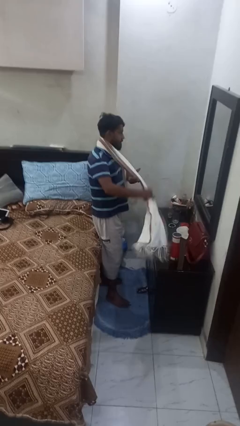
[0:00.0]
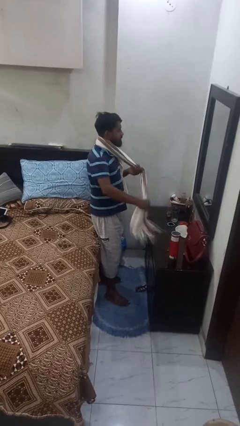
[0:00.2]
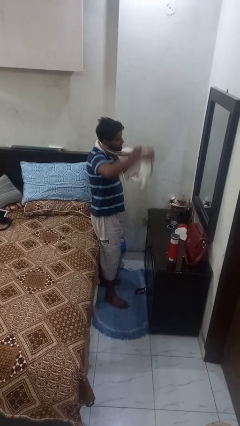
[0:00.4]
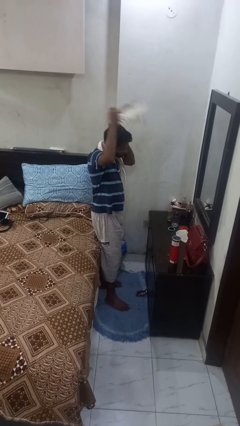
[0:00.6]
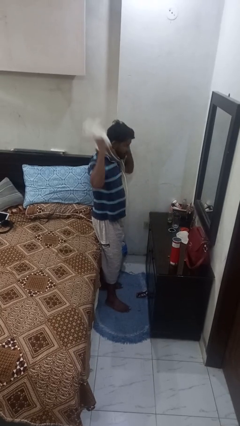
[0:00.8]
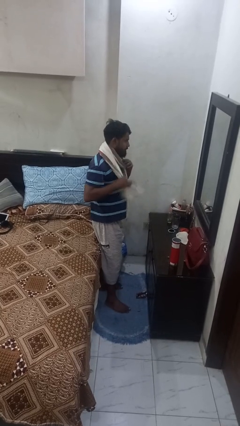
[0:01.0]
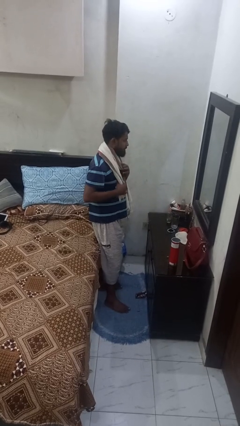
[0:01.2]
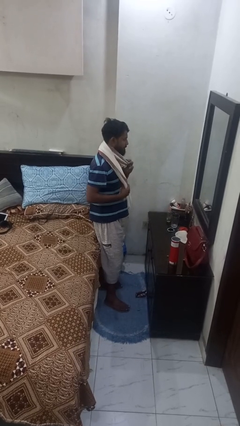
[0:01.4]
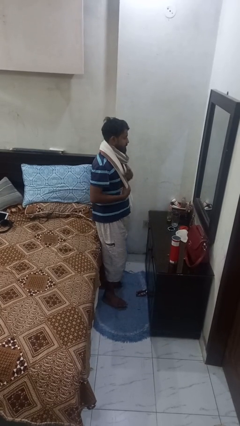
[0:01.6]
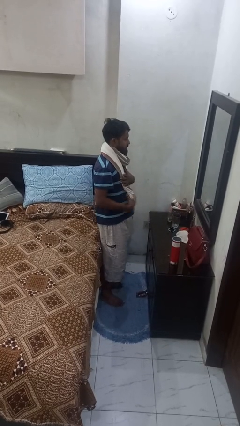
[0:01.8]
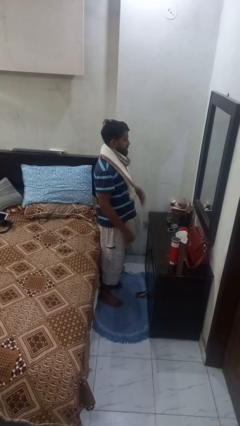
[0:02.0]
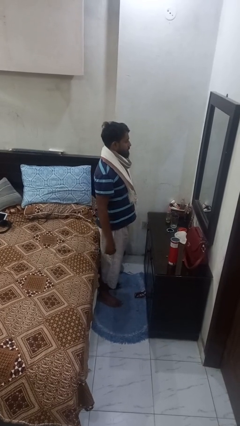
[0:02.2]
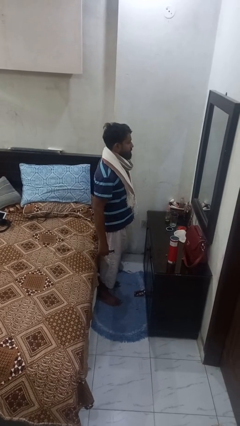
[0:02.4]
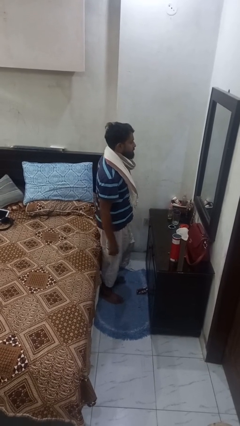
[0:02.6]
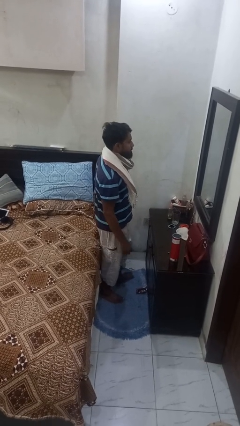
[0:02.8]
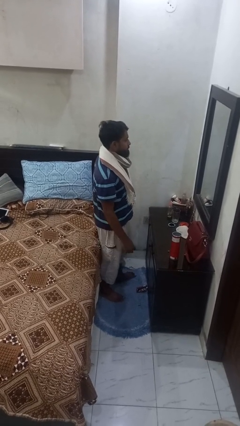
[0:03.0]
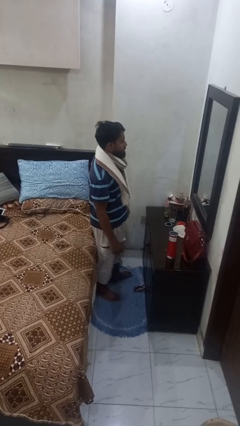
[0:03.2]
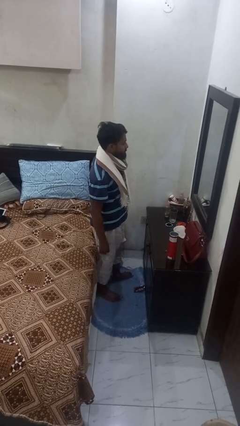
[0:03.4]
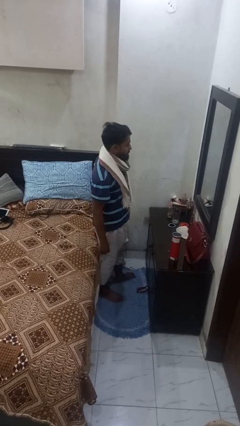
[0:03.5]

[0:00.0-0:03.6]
person puts on scarf

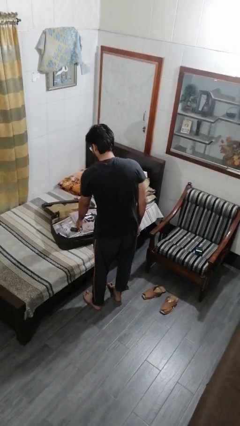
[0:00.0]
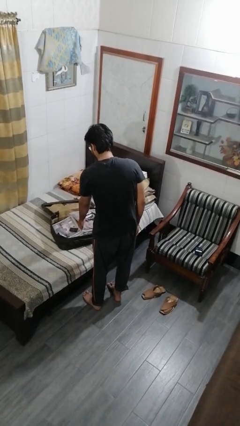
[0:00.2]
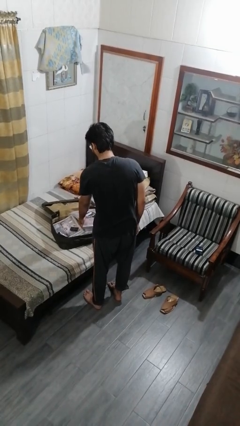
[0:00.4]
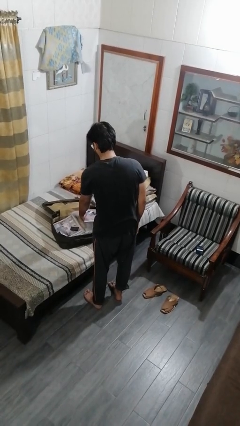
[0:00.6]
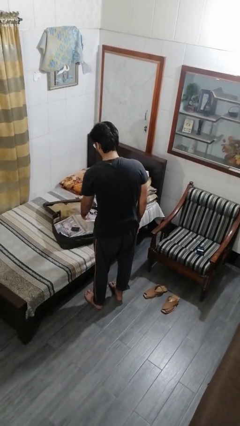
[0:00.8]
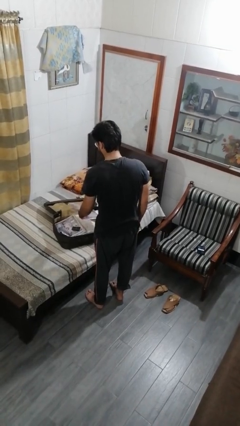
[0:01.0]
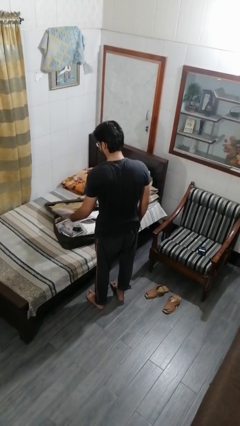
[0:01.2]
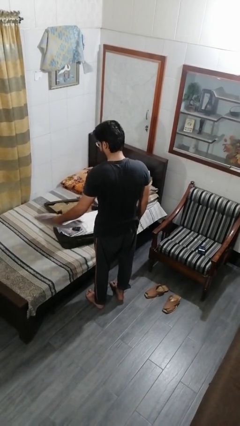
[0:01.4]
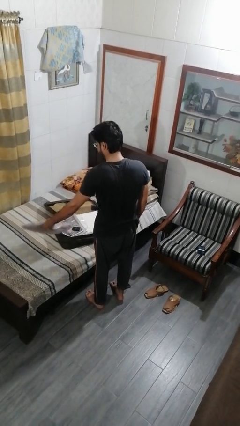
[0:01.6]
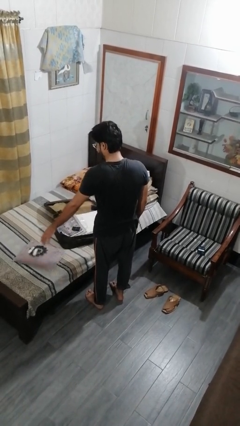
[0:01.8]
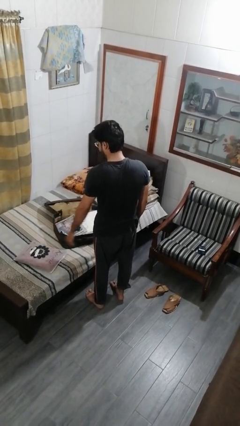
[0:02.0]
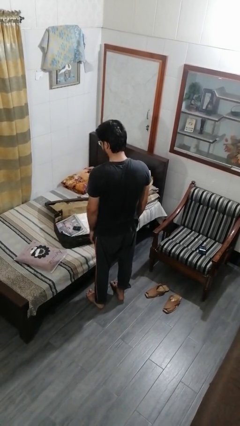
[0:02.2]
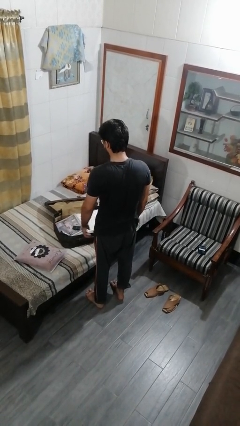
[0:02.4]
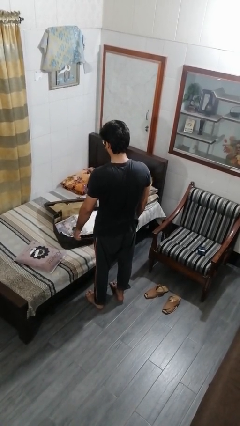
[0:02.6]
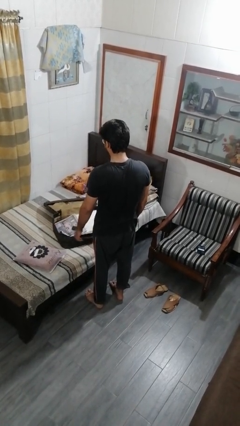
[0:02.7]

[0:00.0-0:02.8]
person unloads clothes from suitcase

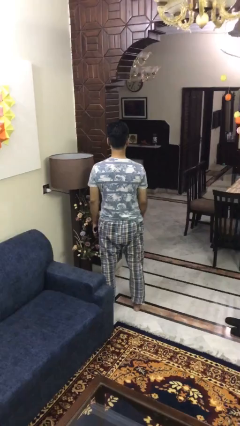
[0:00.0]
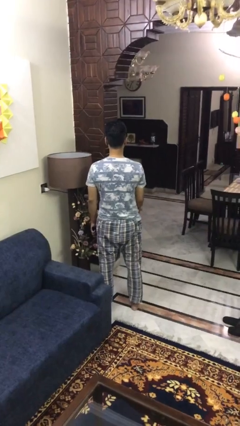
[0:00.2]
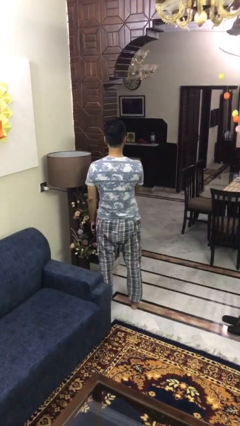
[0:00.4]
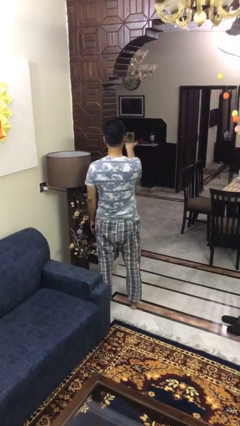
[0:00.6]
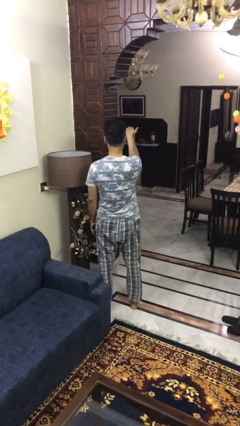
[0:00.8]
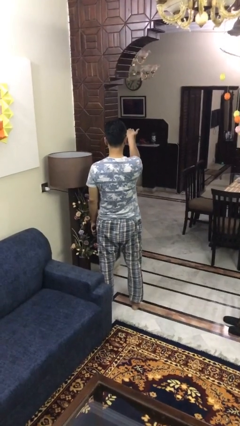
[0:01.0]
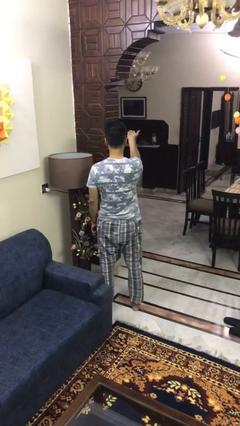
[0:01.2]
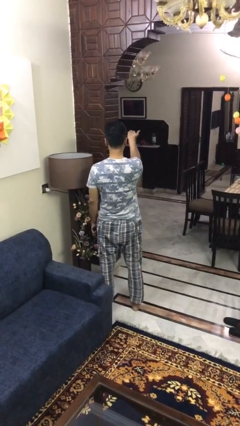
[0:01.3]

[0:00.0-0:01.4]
person gestures swipe up

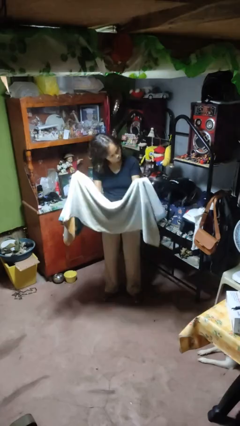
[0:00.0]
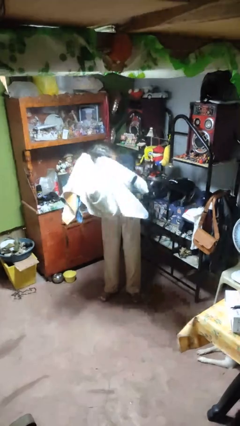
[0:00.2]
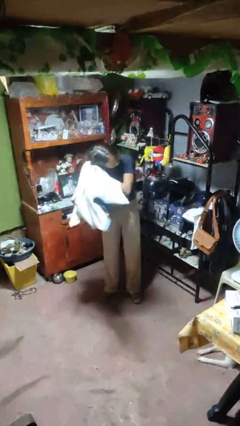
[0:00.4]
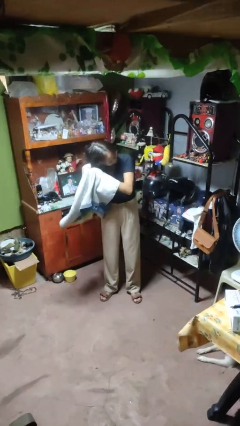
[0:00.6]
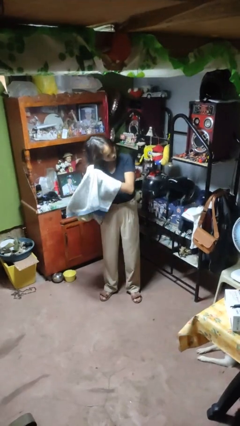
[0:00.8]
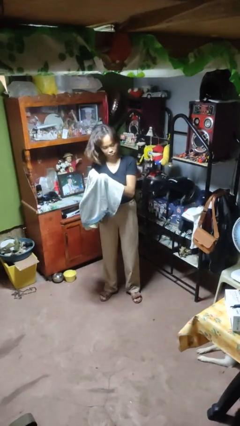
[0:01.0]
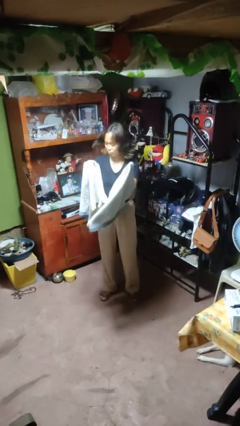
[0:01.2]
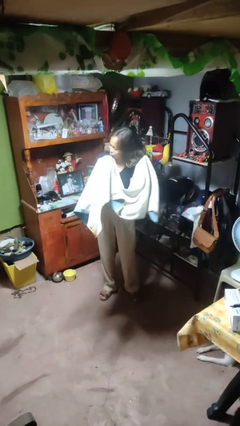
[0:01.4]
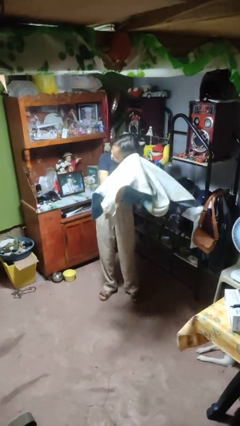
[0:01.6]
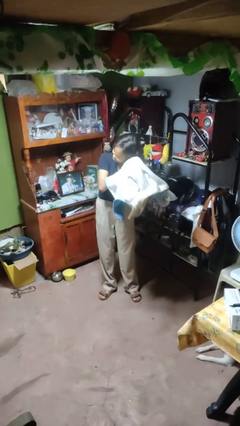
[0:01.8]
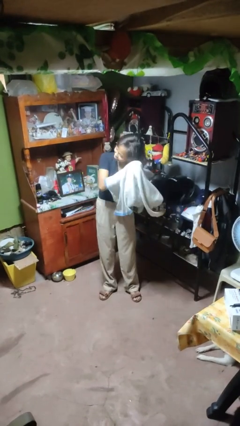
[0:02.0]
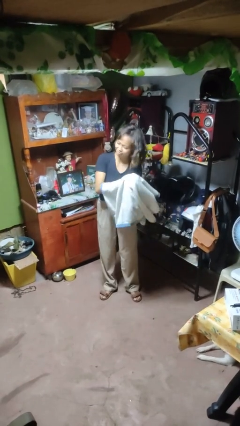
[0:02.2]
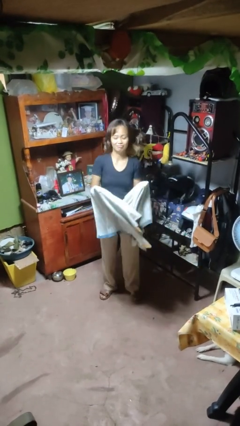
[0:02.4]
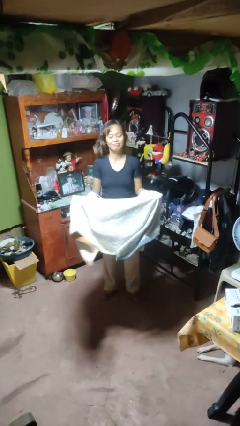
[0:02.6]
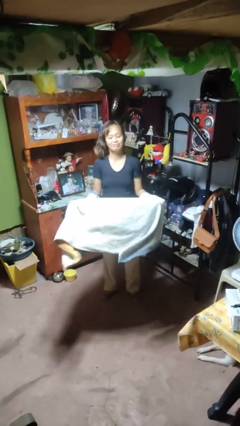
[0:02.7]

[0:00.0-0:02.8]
person dries hair with towel

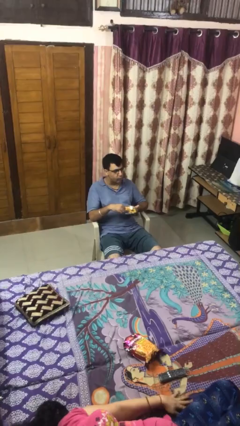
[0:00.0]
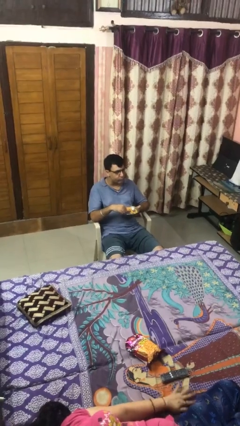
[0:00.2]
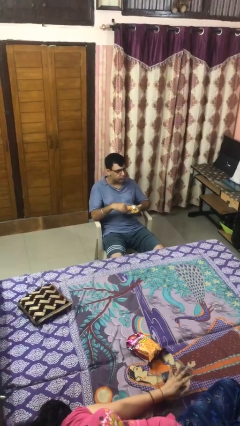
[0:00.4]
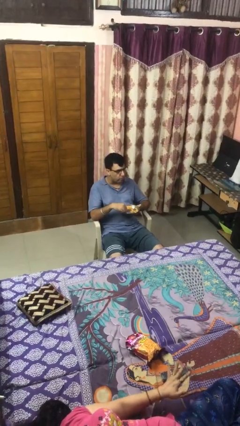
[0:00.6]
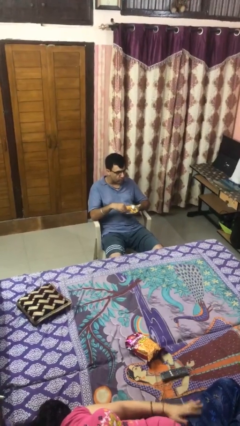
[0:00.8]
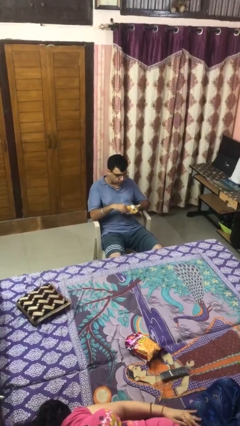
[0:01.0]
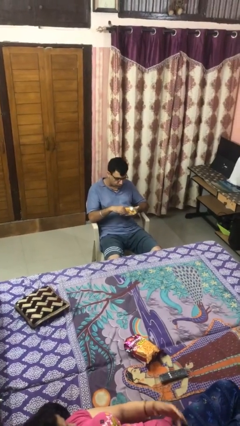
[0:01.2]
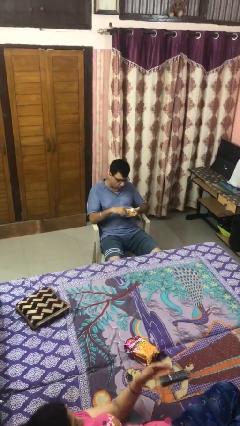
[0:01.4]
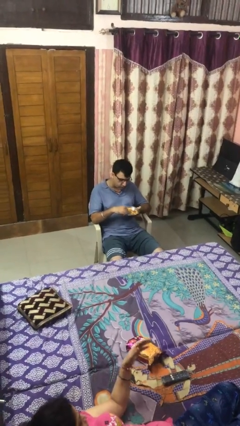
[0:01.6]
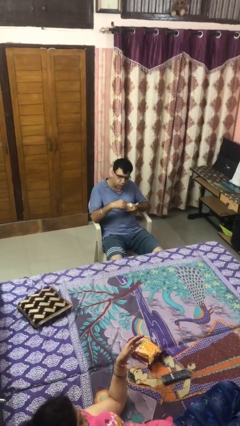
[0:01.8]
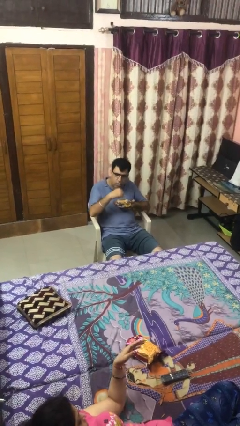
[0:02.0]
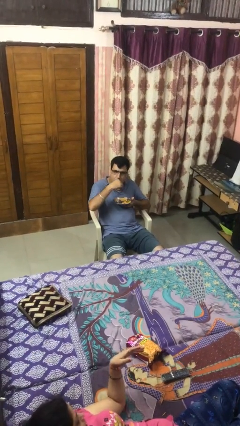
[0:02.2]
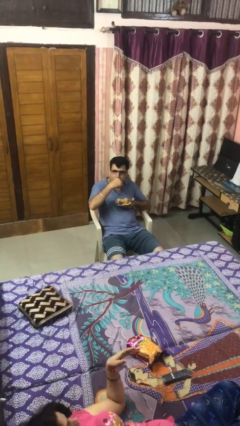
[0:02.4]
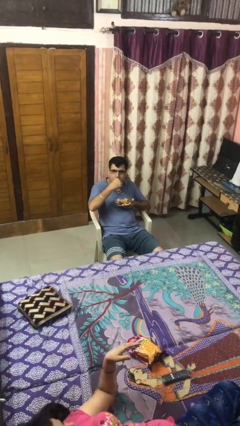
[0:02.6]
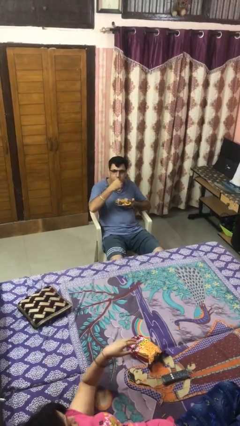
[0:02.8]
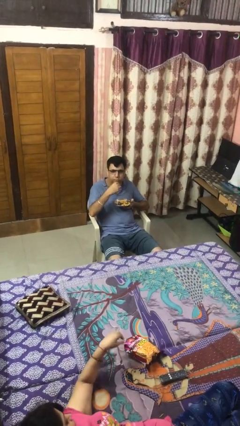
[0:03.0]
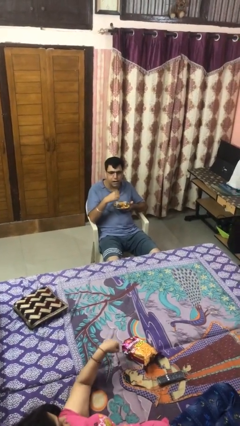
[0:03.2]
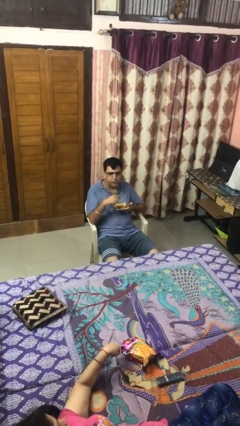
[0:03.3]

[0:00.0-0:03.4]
person eats with hands

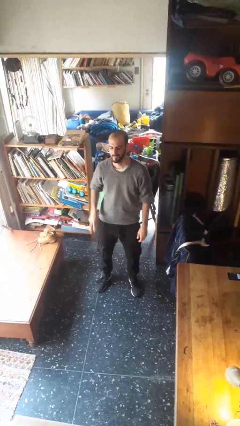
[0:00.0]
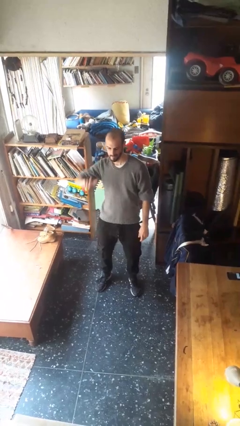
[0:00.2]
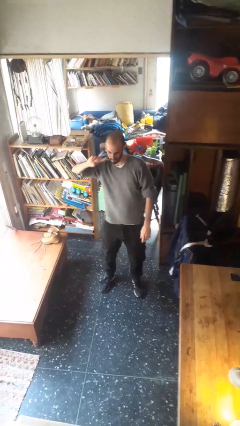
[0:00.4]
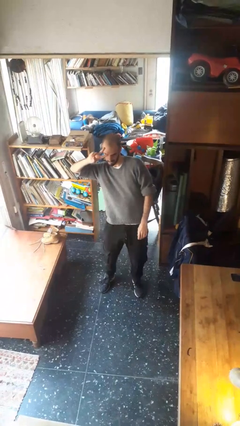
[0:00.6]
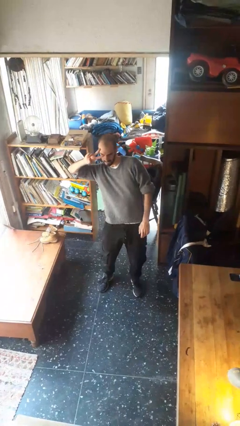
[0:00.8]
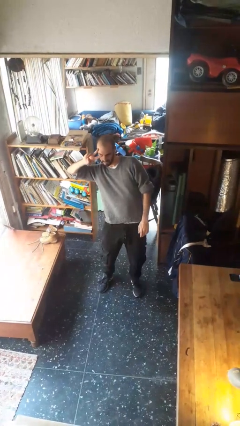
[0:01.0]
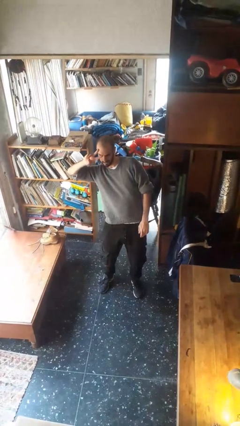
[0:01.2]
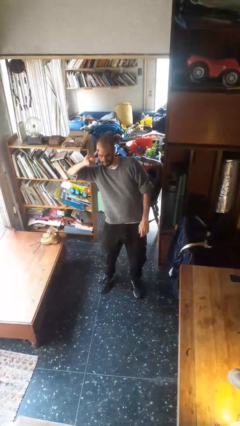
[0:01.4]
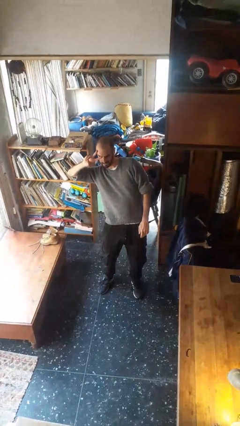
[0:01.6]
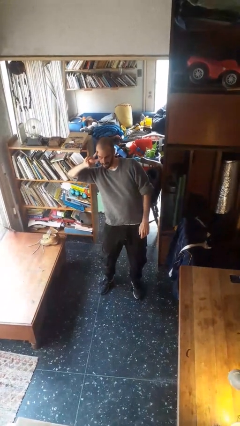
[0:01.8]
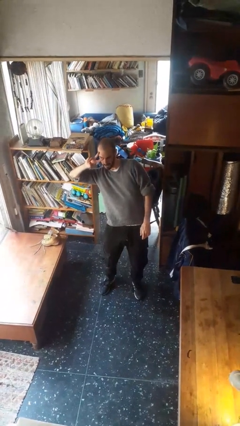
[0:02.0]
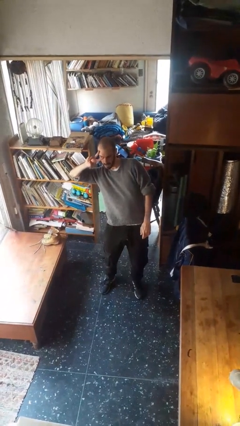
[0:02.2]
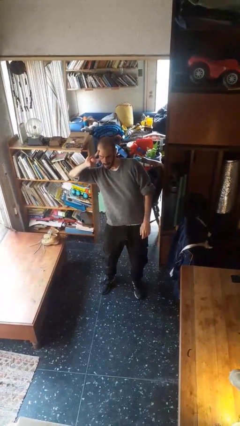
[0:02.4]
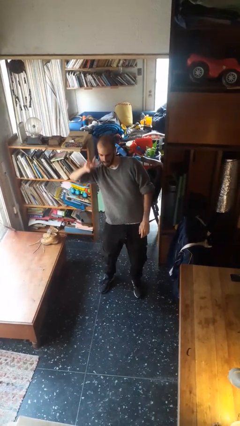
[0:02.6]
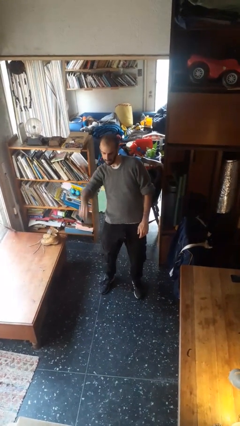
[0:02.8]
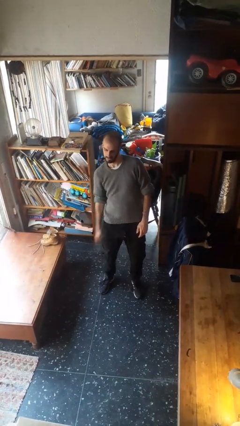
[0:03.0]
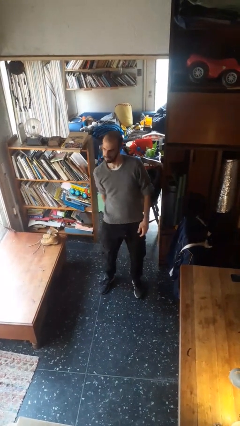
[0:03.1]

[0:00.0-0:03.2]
person gestures peace

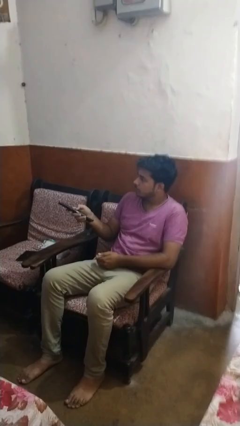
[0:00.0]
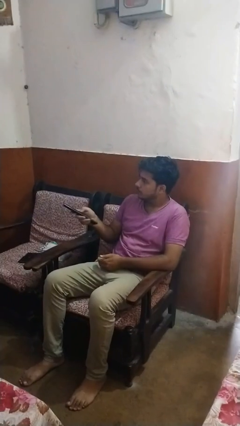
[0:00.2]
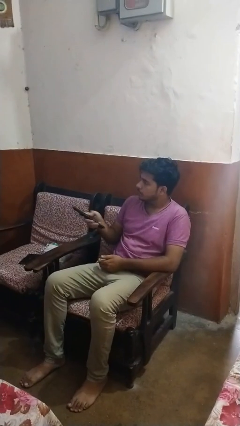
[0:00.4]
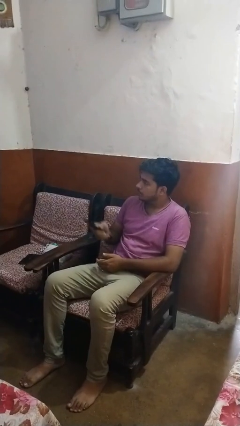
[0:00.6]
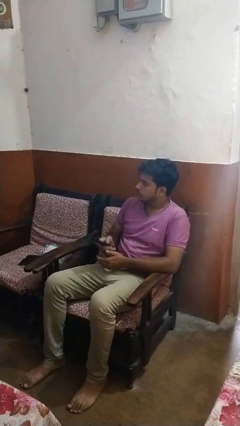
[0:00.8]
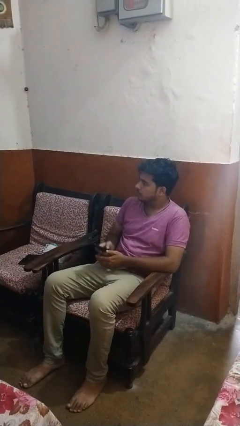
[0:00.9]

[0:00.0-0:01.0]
person uses television remote
